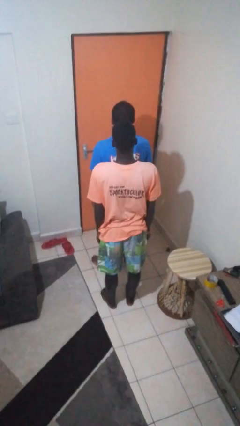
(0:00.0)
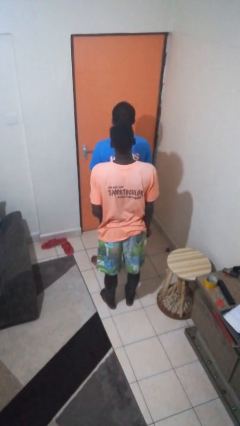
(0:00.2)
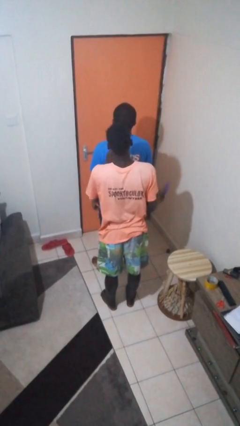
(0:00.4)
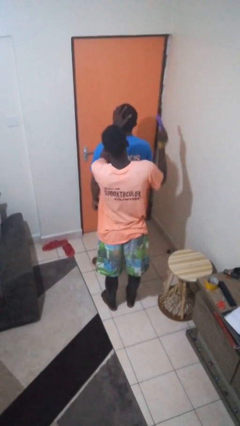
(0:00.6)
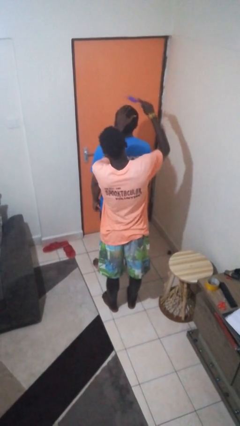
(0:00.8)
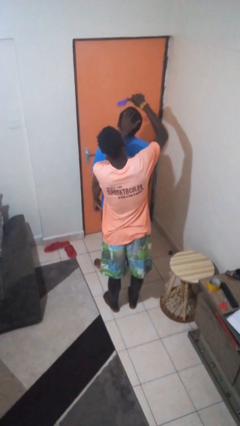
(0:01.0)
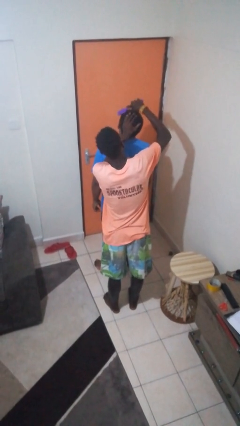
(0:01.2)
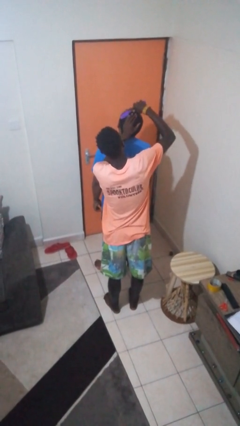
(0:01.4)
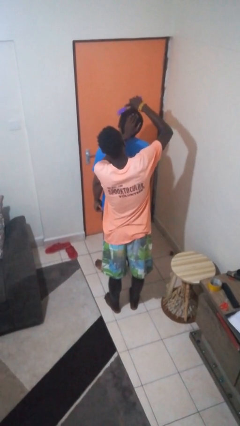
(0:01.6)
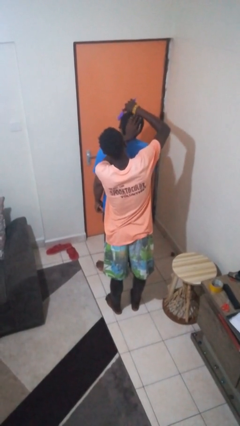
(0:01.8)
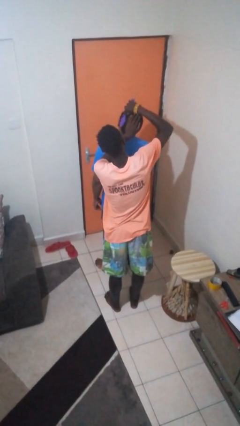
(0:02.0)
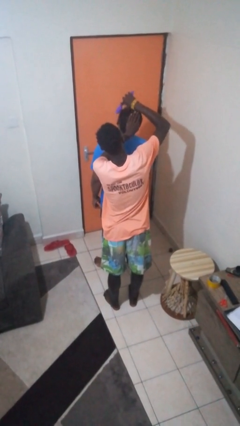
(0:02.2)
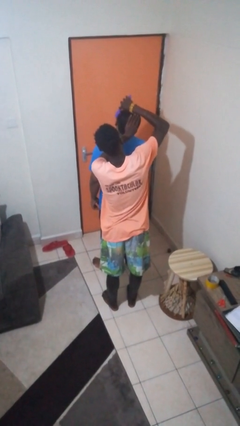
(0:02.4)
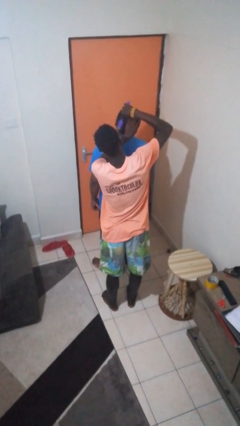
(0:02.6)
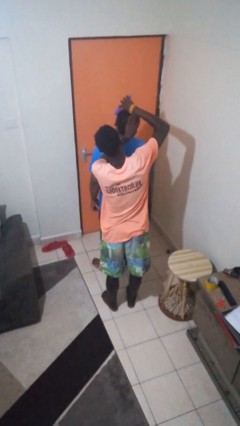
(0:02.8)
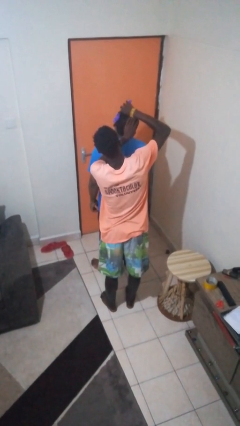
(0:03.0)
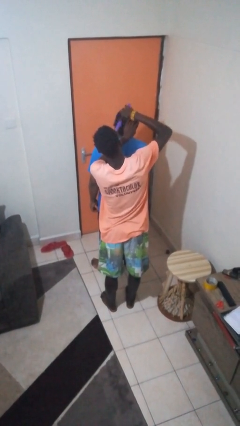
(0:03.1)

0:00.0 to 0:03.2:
person brushes hair of person

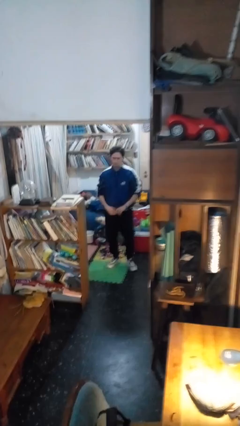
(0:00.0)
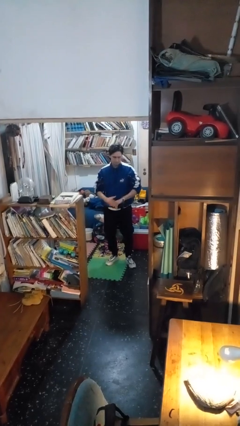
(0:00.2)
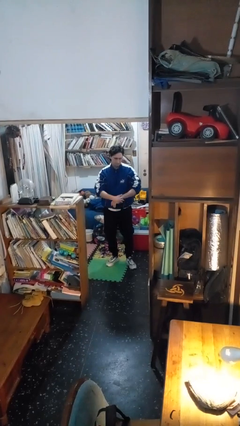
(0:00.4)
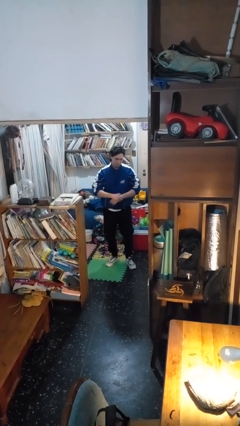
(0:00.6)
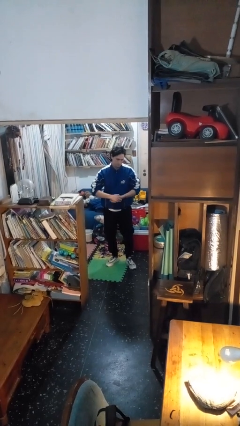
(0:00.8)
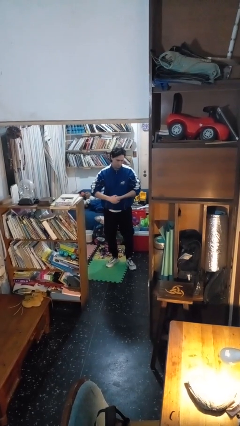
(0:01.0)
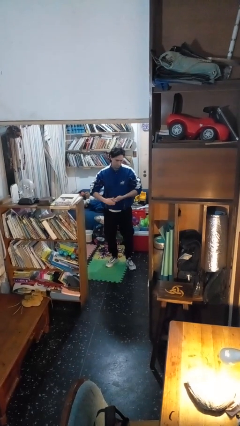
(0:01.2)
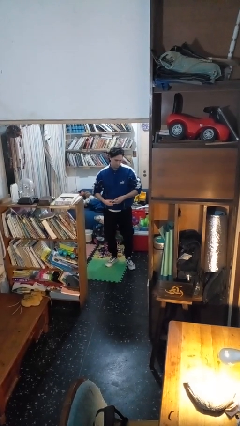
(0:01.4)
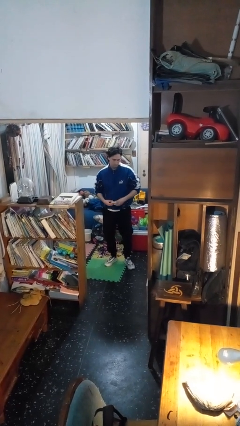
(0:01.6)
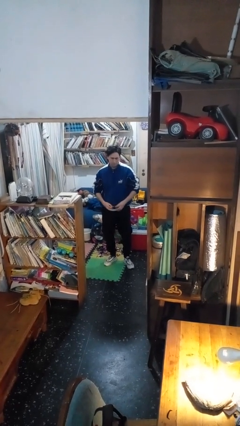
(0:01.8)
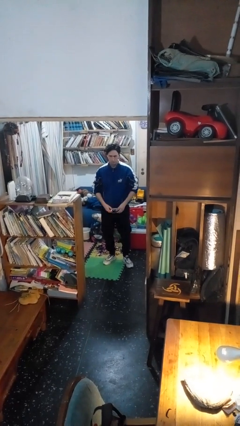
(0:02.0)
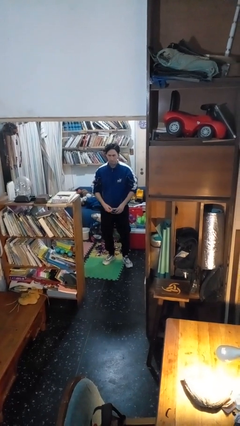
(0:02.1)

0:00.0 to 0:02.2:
person takes off wristwatch

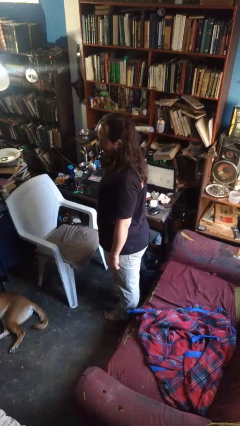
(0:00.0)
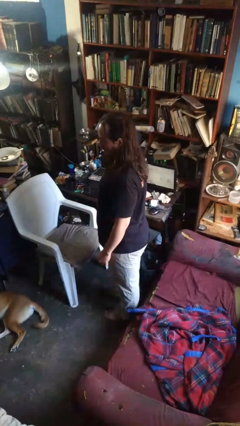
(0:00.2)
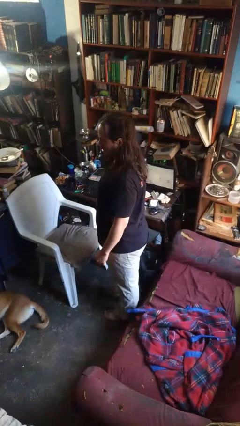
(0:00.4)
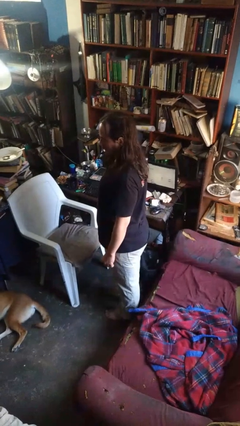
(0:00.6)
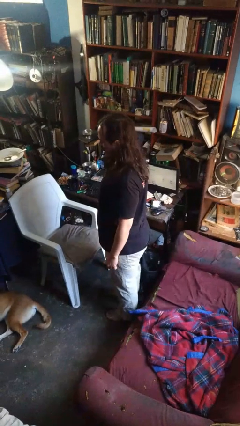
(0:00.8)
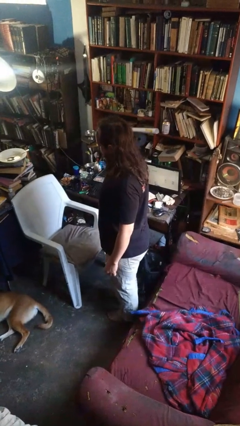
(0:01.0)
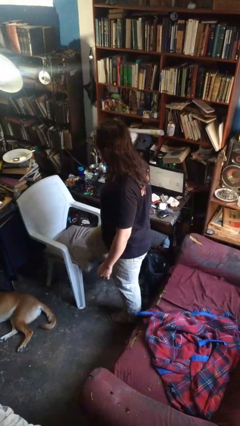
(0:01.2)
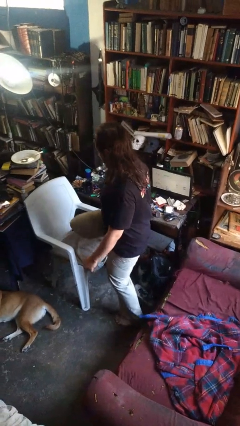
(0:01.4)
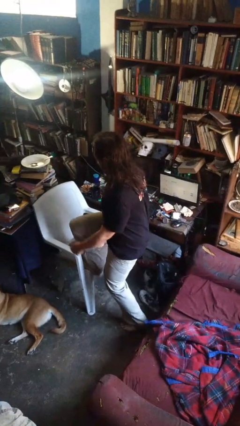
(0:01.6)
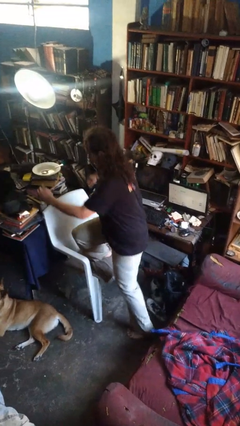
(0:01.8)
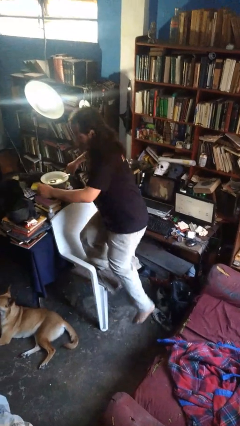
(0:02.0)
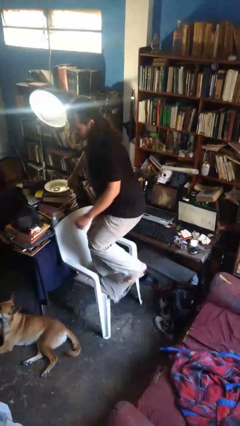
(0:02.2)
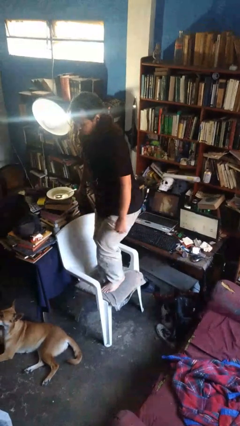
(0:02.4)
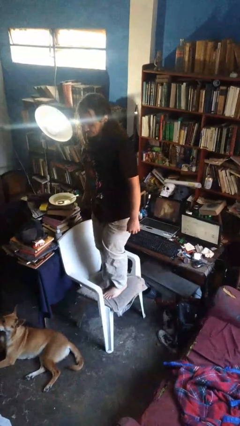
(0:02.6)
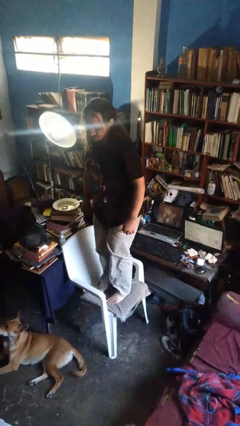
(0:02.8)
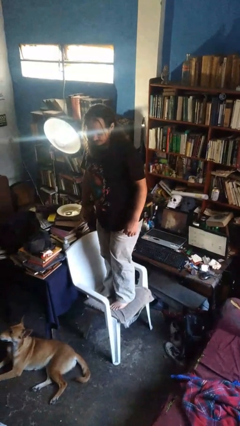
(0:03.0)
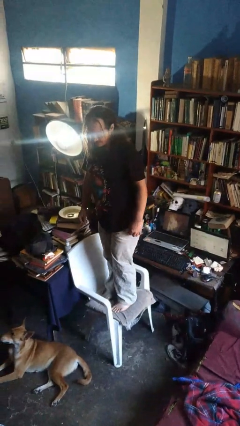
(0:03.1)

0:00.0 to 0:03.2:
person climbs on chair

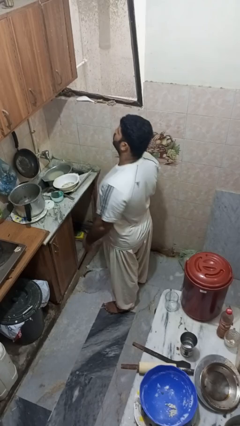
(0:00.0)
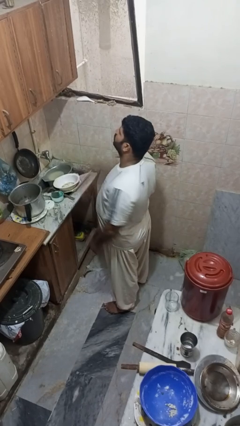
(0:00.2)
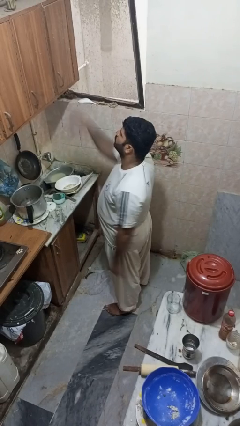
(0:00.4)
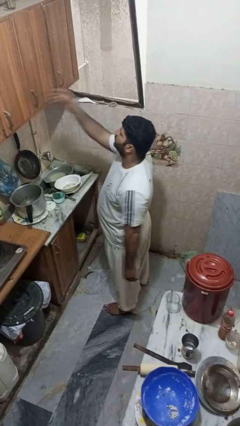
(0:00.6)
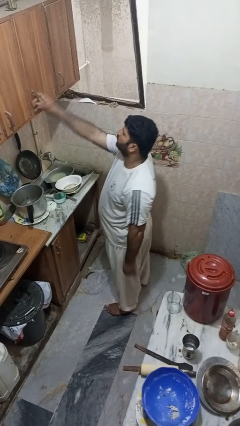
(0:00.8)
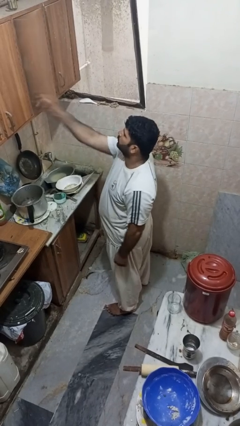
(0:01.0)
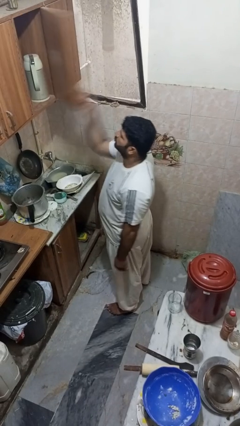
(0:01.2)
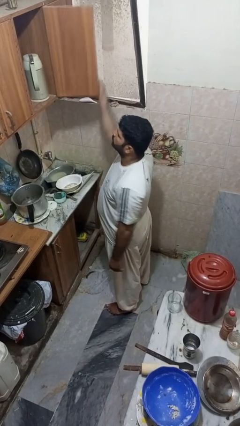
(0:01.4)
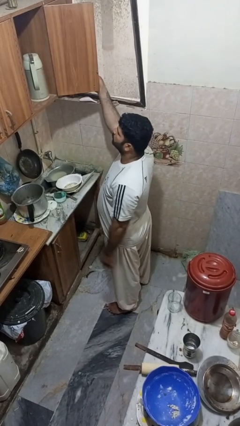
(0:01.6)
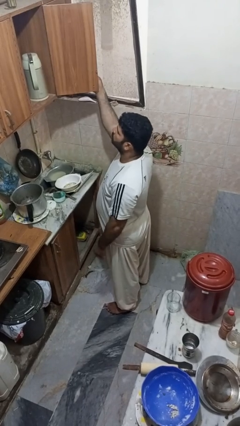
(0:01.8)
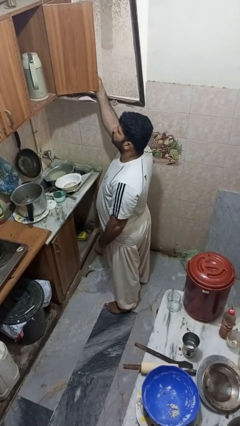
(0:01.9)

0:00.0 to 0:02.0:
person opens cabinet

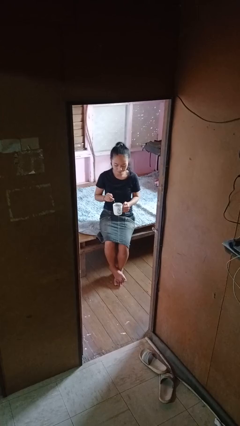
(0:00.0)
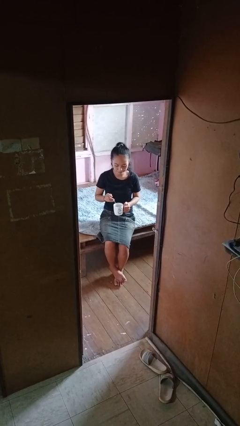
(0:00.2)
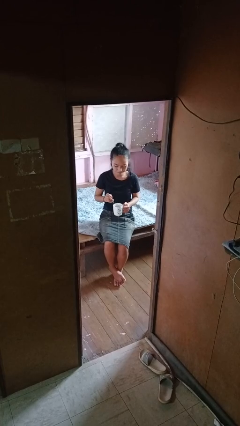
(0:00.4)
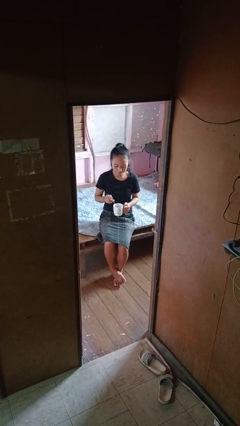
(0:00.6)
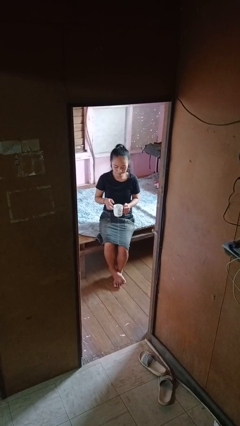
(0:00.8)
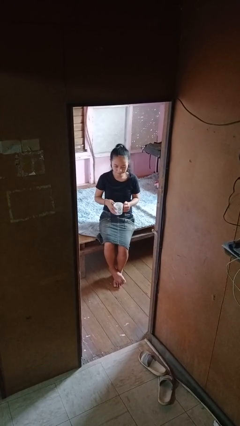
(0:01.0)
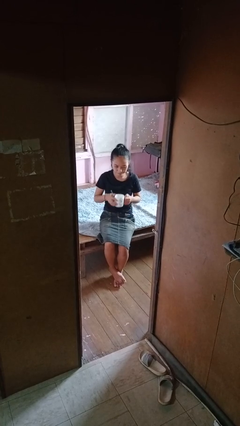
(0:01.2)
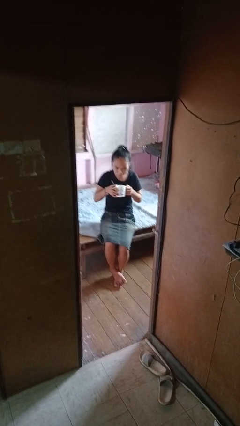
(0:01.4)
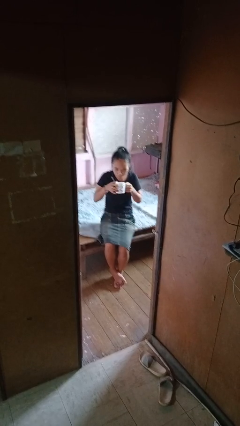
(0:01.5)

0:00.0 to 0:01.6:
person stirs mug

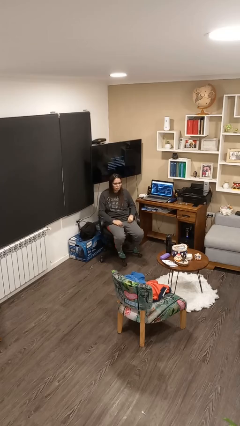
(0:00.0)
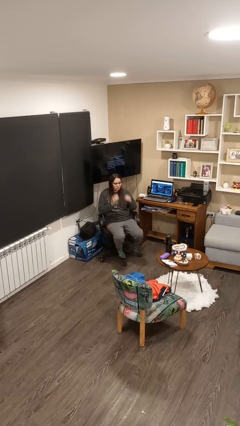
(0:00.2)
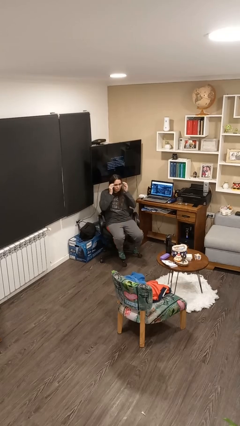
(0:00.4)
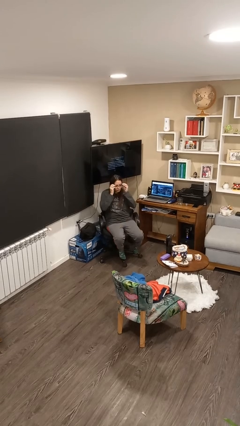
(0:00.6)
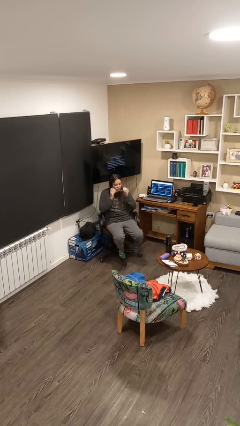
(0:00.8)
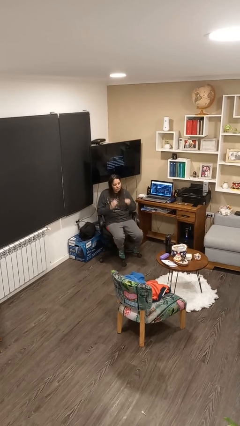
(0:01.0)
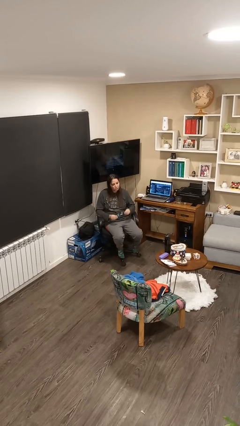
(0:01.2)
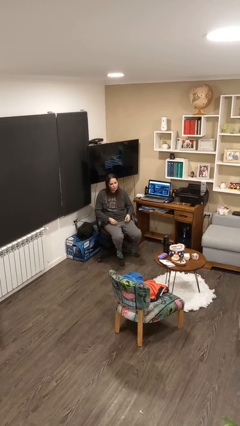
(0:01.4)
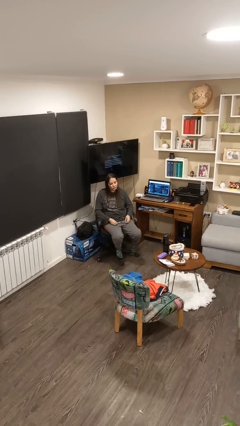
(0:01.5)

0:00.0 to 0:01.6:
person takes off glasses

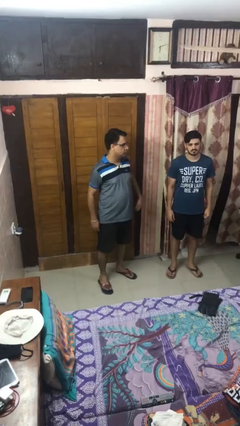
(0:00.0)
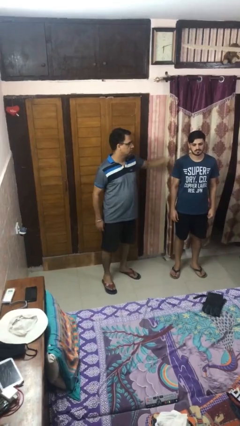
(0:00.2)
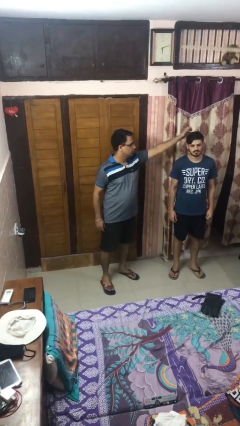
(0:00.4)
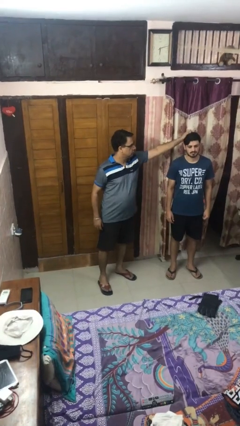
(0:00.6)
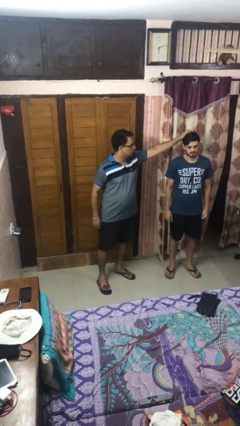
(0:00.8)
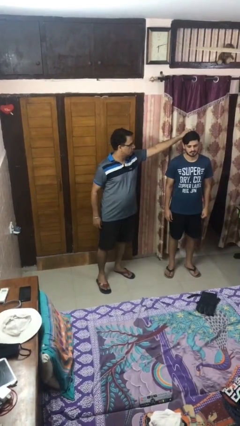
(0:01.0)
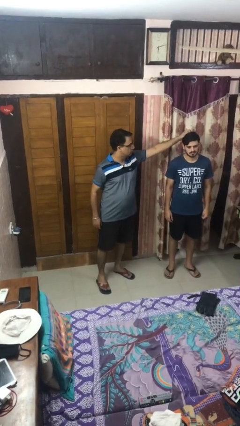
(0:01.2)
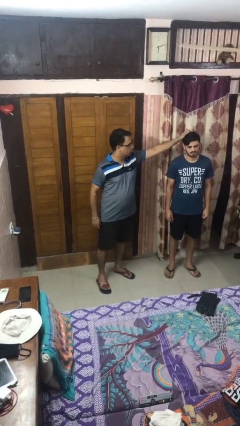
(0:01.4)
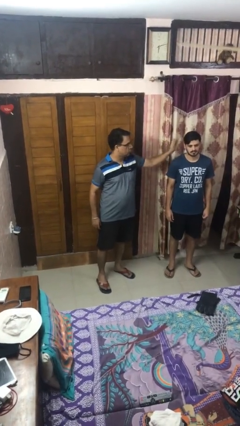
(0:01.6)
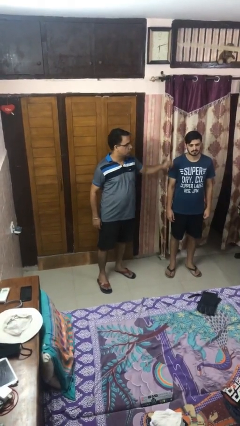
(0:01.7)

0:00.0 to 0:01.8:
person grabs person by hair

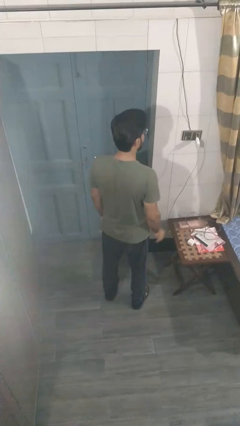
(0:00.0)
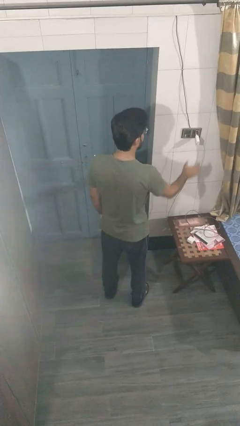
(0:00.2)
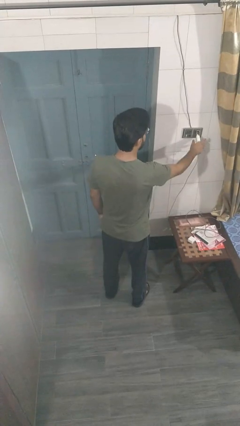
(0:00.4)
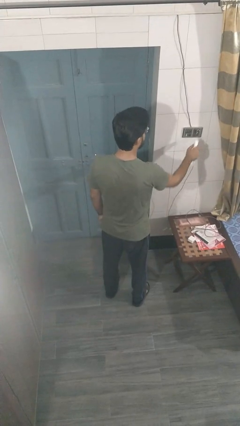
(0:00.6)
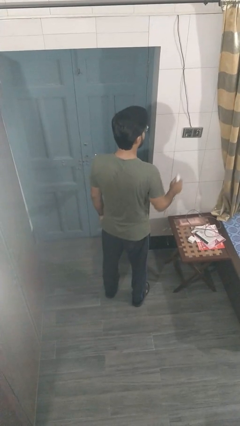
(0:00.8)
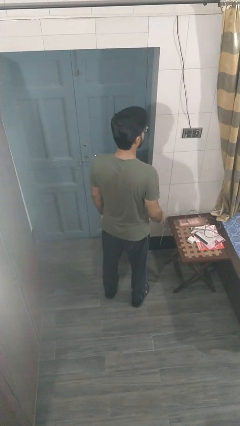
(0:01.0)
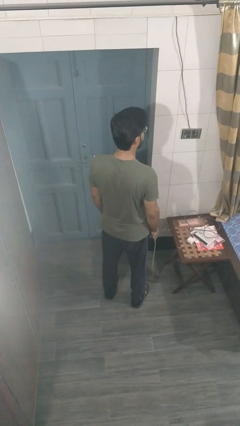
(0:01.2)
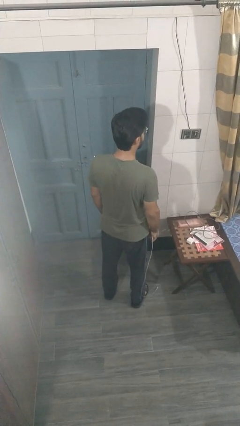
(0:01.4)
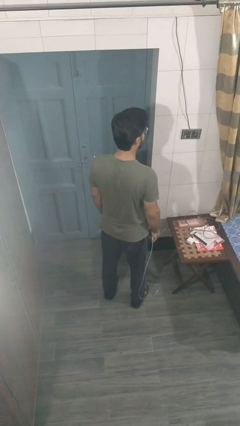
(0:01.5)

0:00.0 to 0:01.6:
person unplugs from electrical socket
